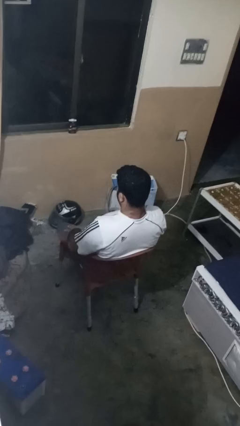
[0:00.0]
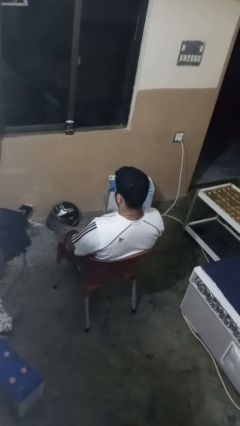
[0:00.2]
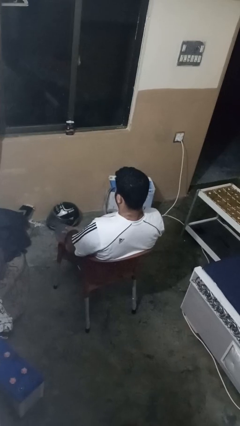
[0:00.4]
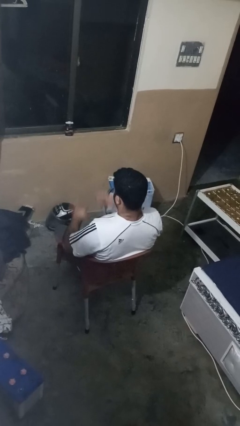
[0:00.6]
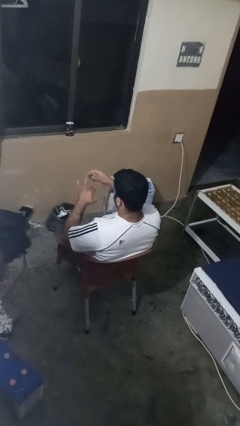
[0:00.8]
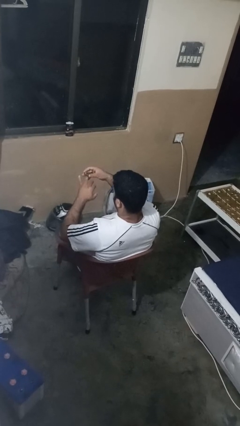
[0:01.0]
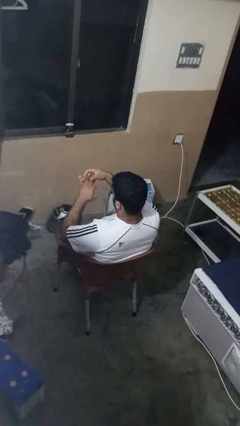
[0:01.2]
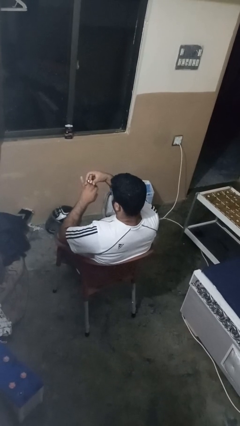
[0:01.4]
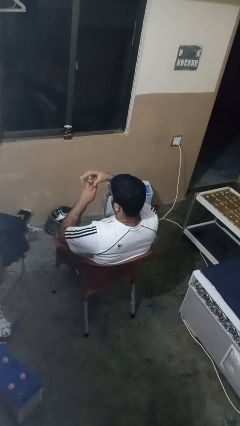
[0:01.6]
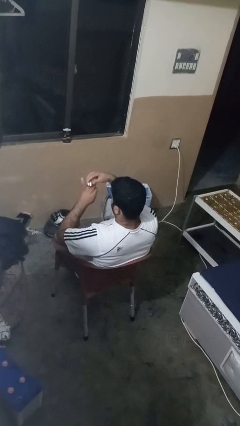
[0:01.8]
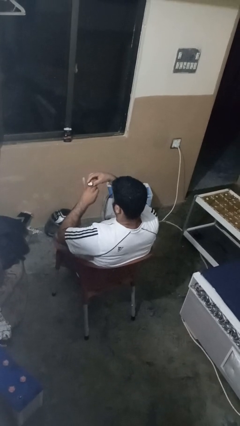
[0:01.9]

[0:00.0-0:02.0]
person puts on ring

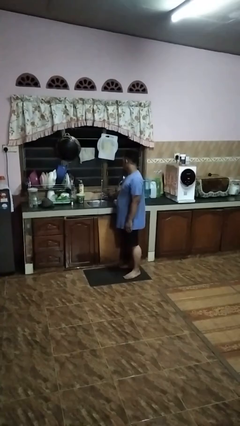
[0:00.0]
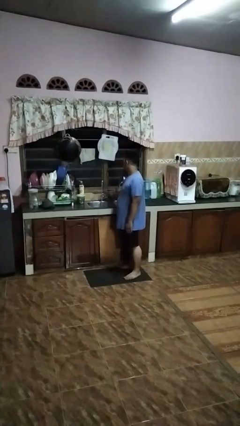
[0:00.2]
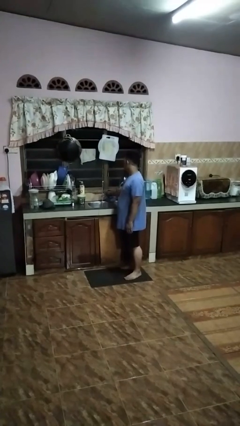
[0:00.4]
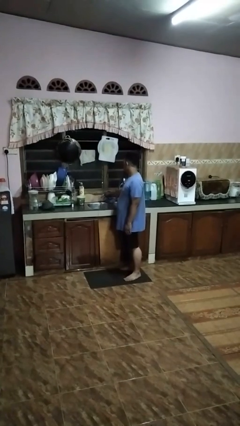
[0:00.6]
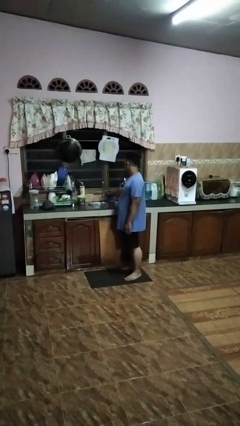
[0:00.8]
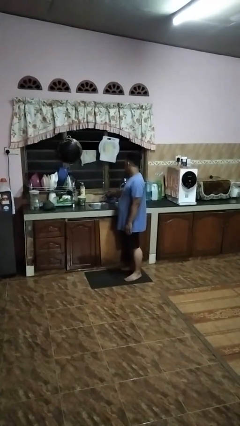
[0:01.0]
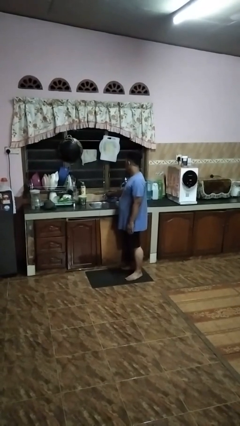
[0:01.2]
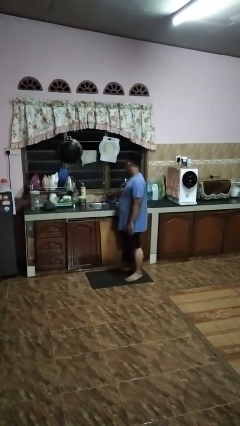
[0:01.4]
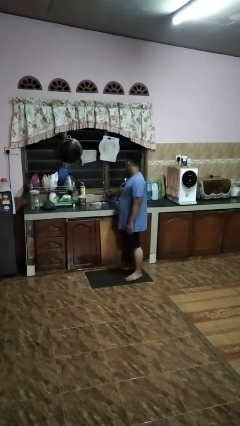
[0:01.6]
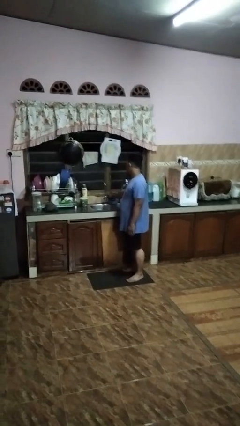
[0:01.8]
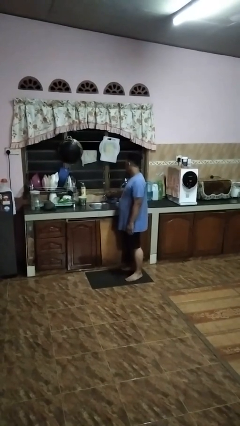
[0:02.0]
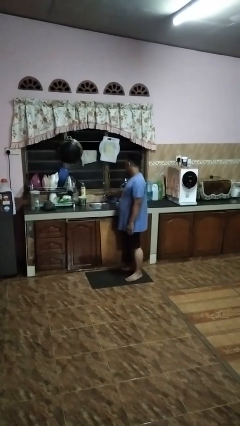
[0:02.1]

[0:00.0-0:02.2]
person turns off faucet

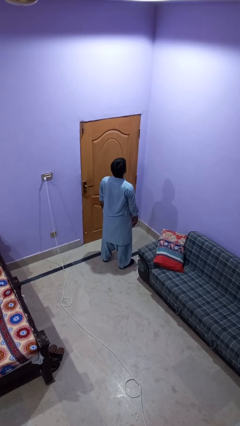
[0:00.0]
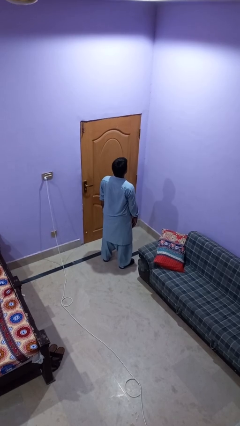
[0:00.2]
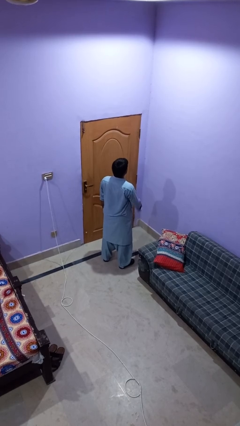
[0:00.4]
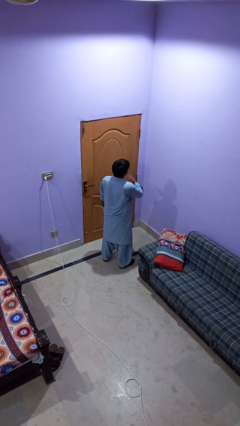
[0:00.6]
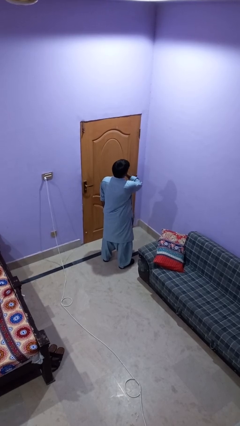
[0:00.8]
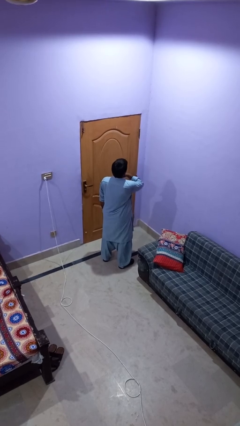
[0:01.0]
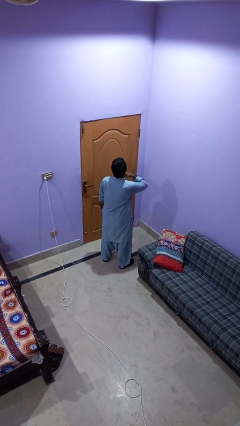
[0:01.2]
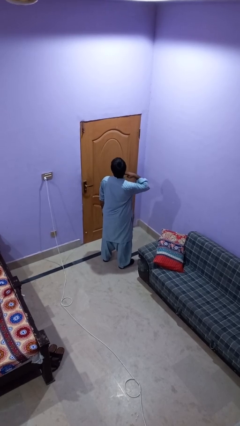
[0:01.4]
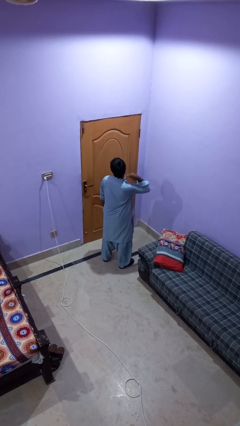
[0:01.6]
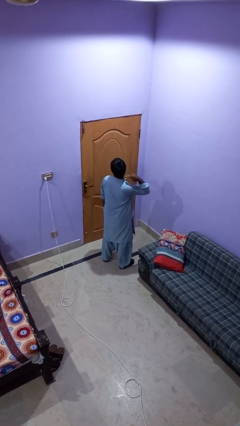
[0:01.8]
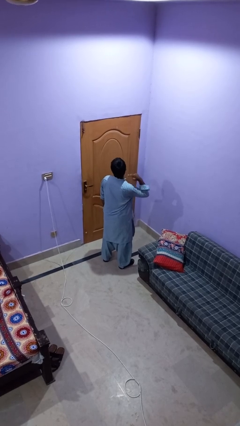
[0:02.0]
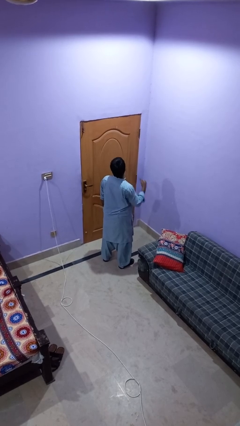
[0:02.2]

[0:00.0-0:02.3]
person gestures cut

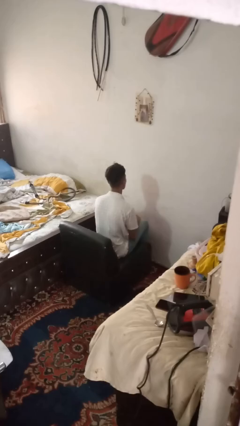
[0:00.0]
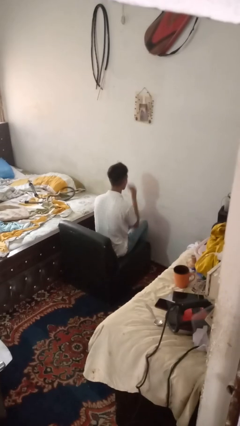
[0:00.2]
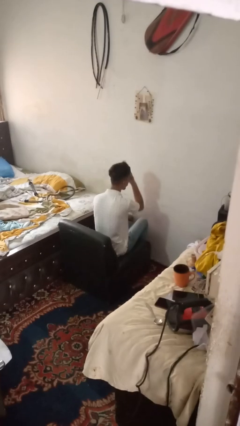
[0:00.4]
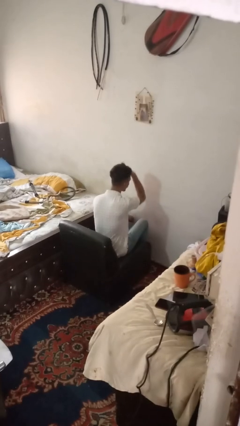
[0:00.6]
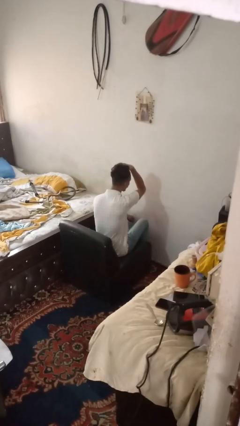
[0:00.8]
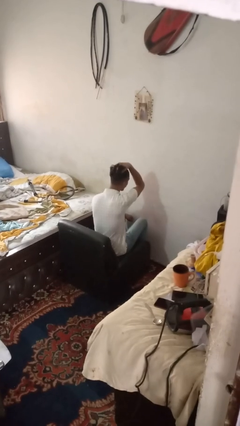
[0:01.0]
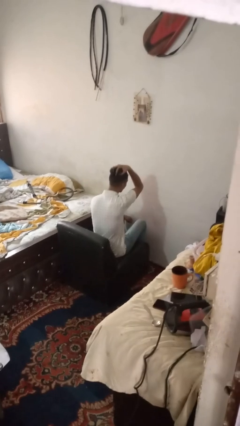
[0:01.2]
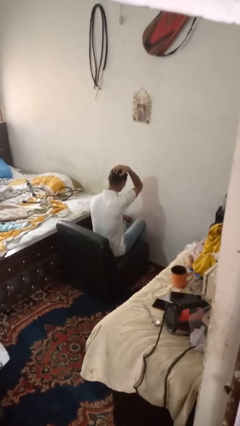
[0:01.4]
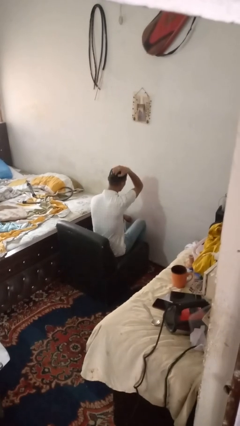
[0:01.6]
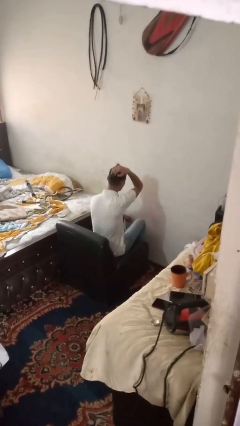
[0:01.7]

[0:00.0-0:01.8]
person strokes hair

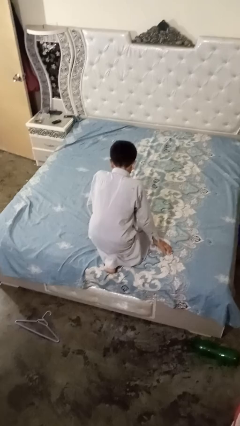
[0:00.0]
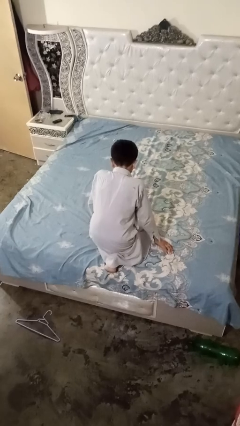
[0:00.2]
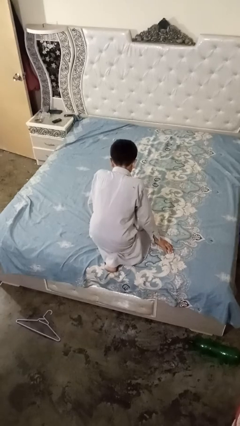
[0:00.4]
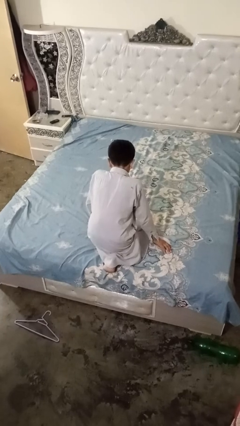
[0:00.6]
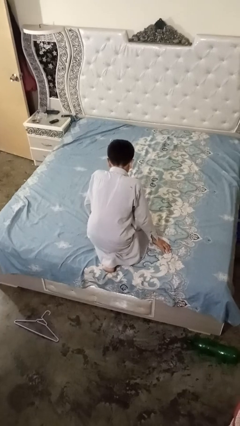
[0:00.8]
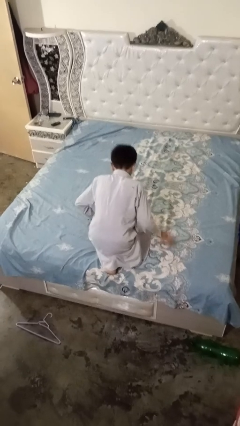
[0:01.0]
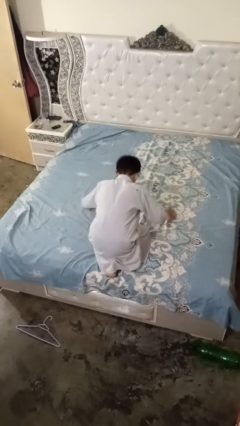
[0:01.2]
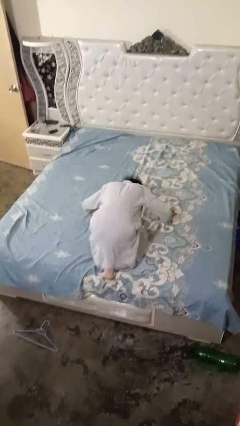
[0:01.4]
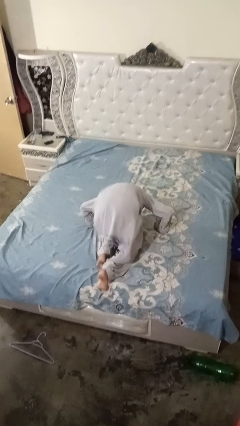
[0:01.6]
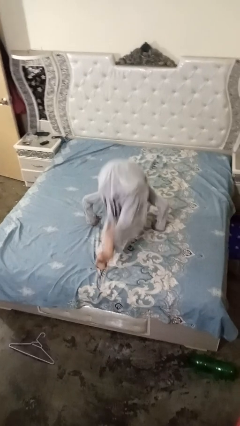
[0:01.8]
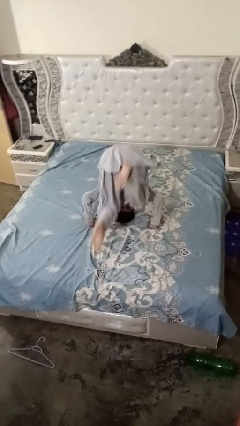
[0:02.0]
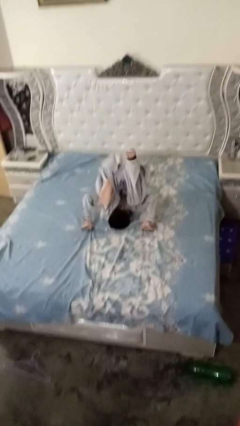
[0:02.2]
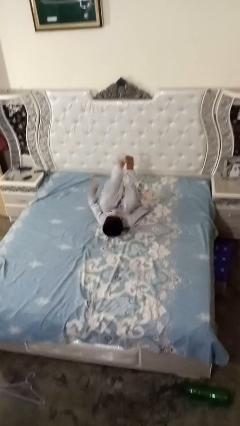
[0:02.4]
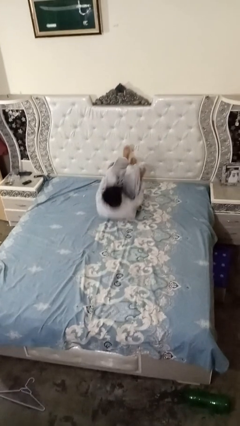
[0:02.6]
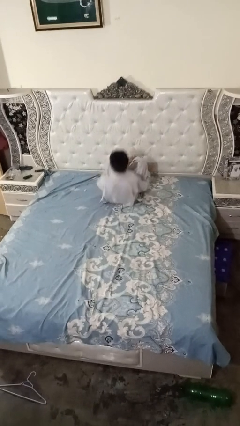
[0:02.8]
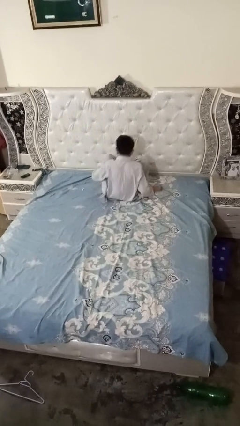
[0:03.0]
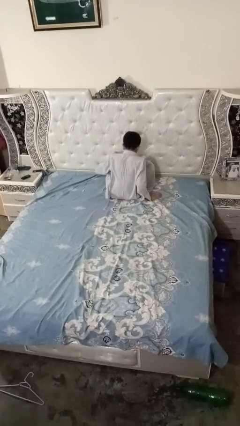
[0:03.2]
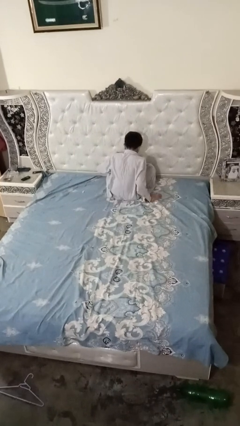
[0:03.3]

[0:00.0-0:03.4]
person somersaults

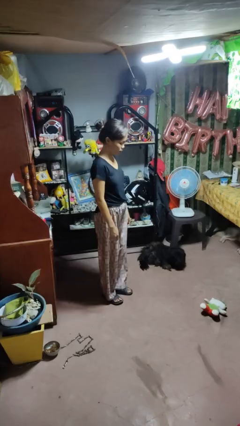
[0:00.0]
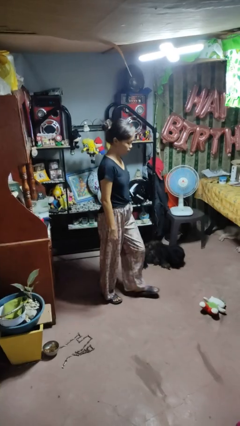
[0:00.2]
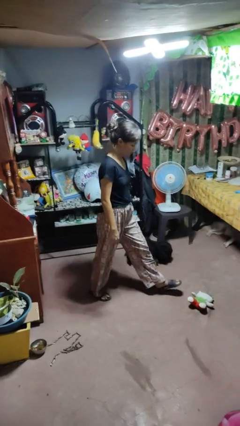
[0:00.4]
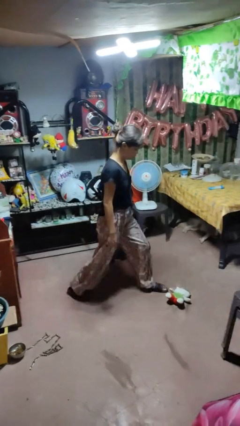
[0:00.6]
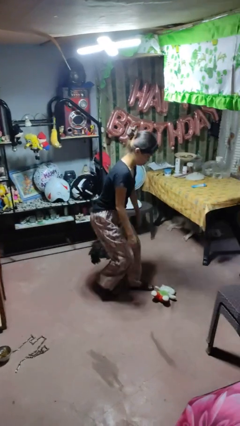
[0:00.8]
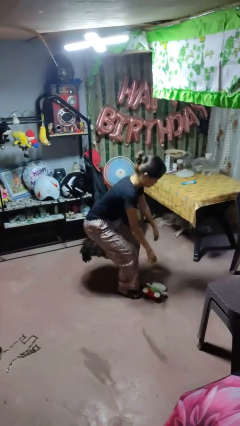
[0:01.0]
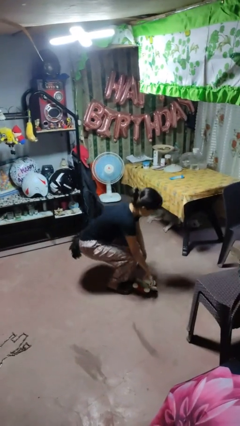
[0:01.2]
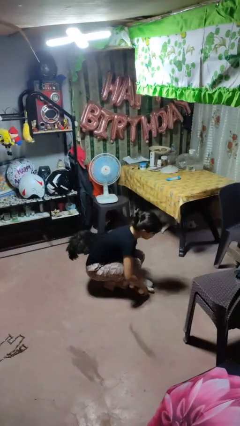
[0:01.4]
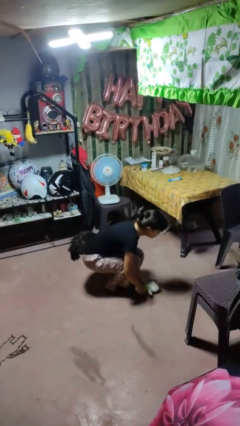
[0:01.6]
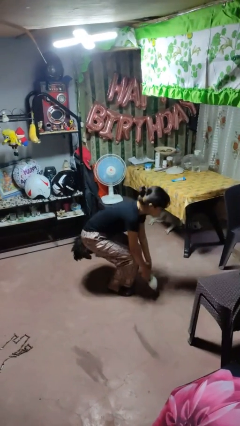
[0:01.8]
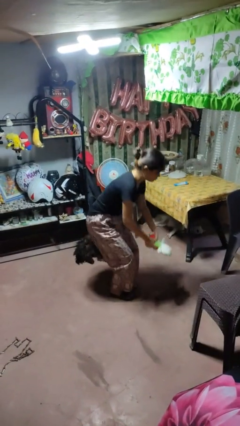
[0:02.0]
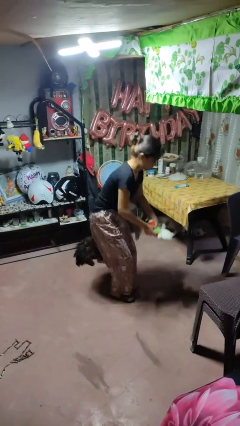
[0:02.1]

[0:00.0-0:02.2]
person picks up object from floor

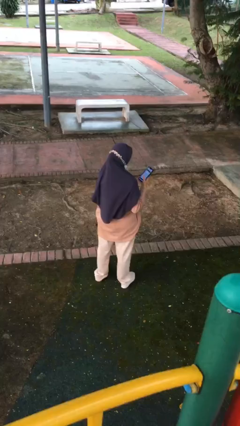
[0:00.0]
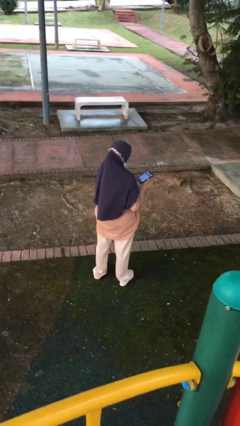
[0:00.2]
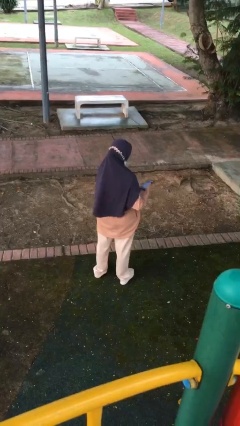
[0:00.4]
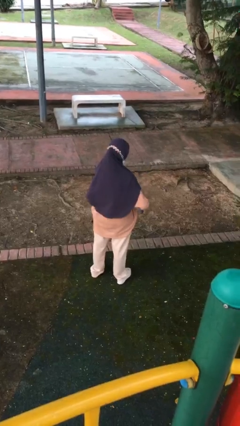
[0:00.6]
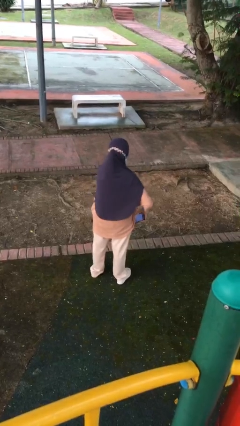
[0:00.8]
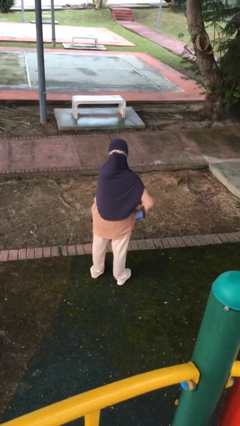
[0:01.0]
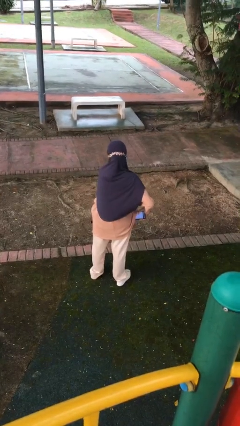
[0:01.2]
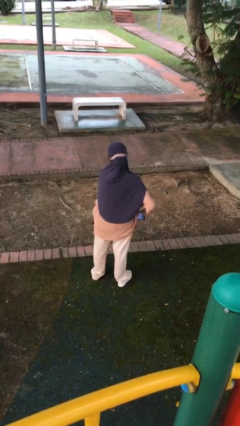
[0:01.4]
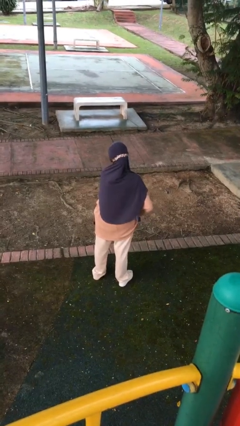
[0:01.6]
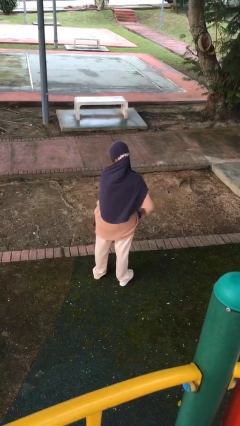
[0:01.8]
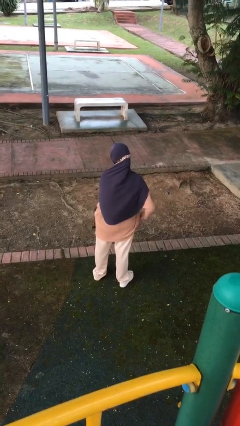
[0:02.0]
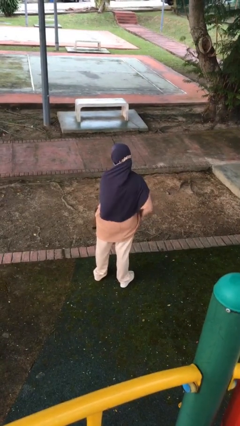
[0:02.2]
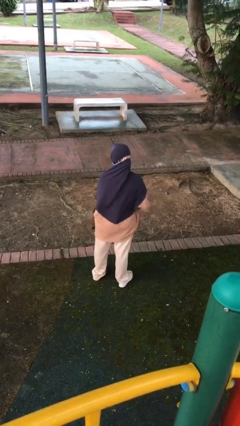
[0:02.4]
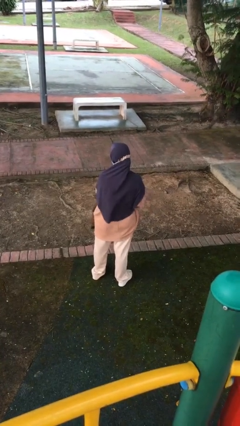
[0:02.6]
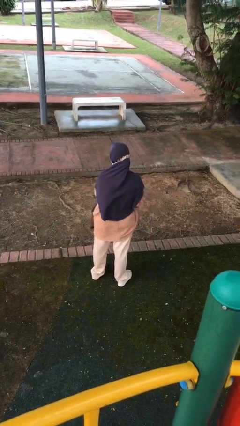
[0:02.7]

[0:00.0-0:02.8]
person puts phone into pocket

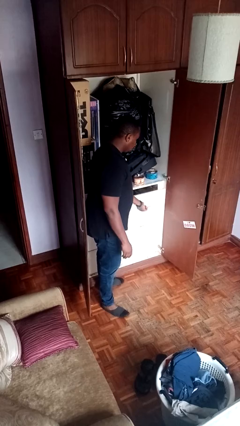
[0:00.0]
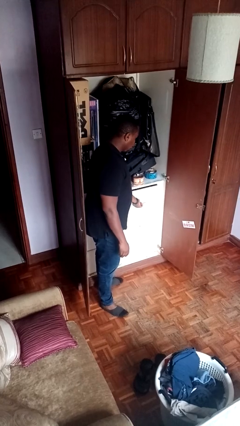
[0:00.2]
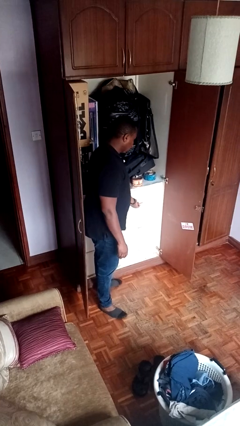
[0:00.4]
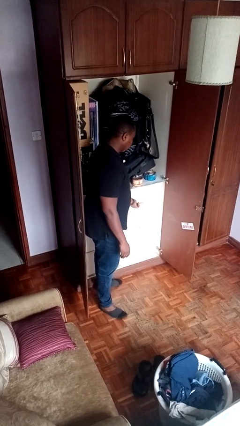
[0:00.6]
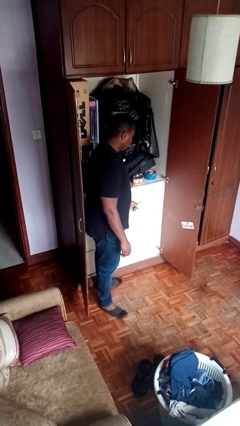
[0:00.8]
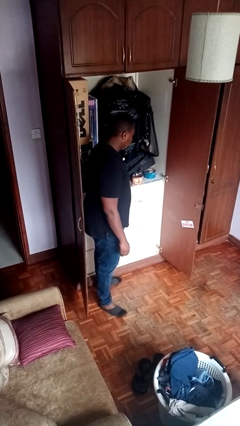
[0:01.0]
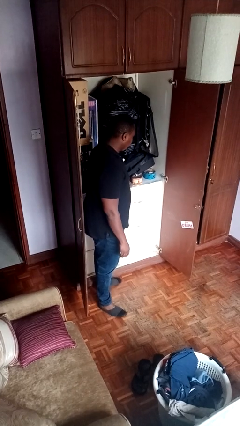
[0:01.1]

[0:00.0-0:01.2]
person closes dresser drawer
